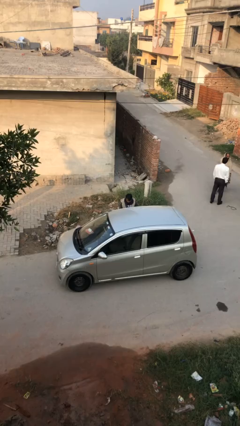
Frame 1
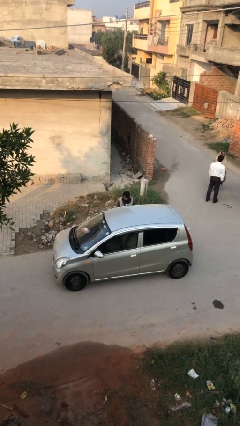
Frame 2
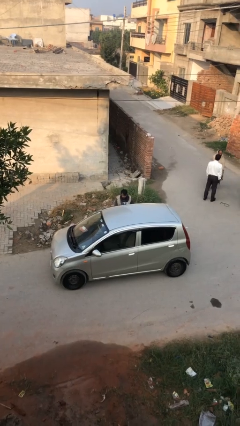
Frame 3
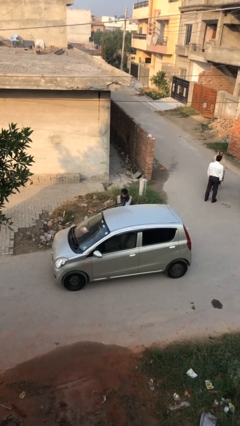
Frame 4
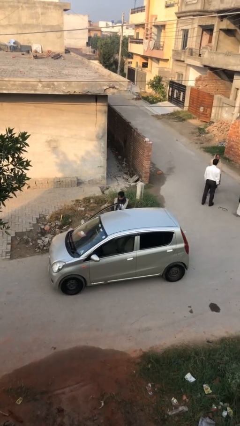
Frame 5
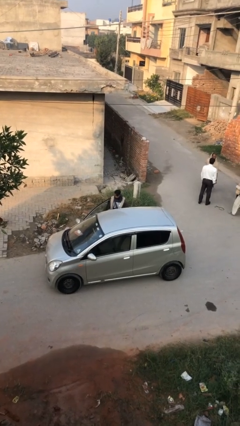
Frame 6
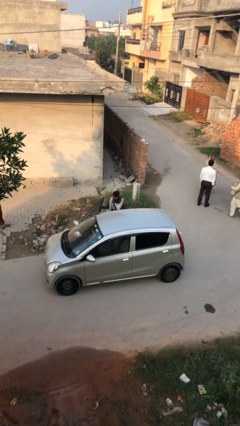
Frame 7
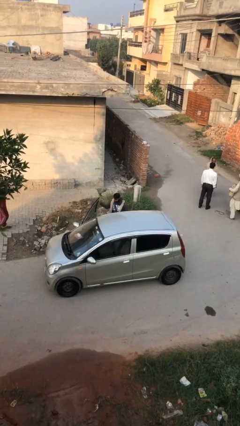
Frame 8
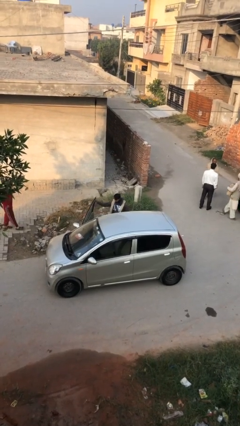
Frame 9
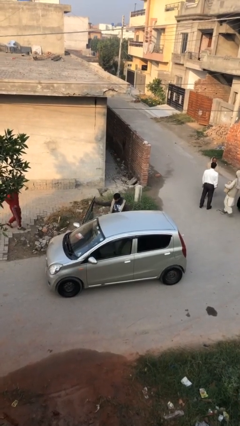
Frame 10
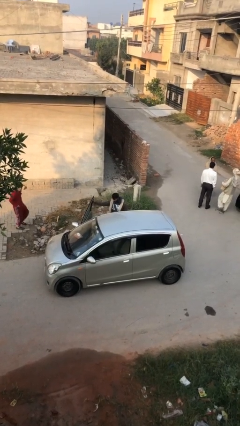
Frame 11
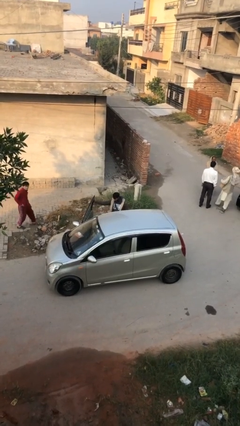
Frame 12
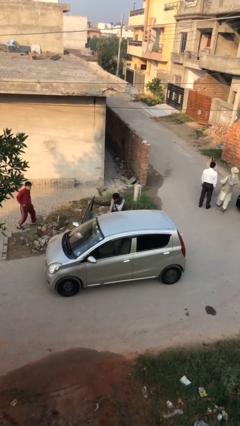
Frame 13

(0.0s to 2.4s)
person opens car door

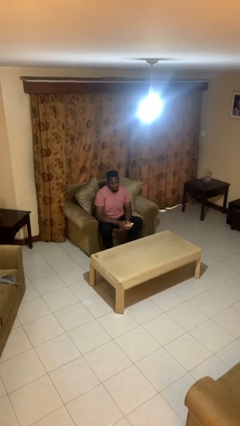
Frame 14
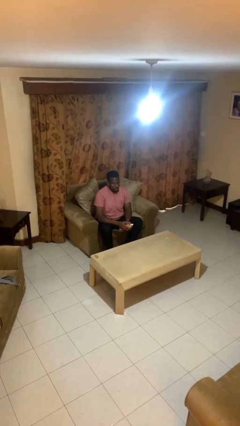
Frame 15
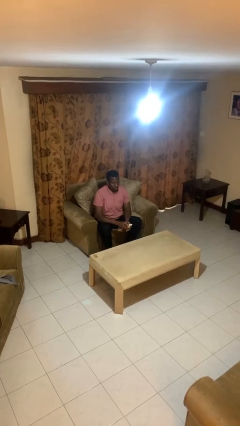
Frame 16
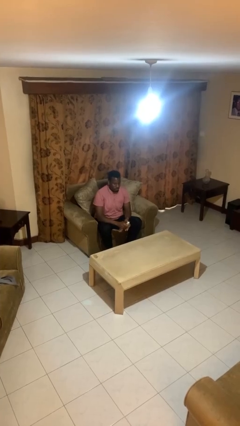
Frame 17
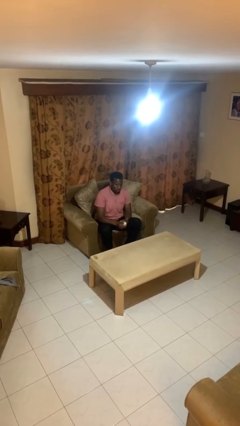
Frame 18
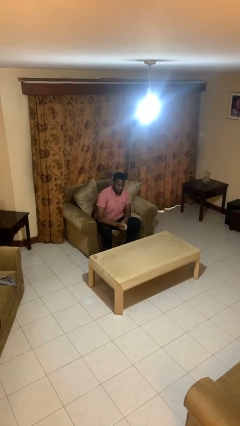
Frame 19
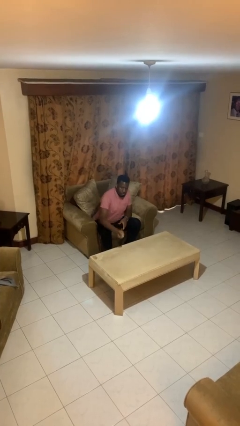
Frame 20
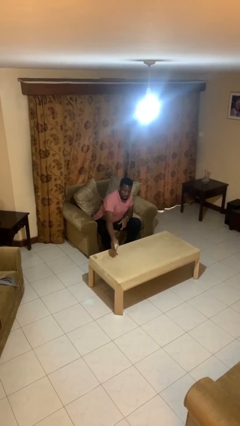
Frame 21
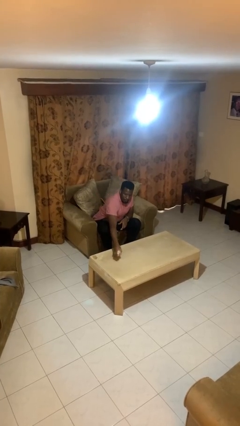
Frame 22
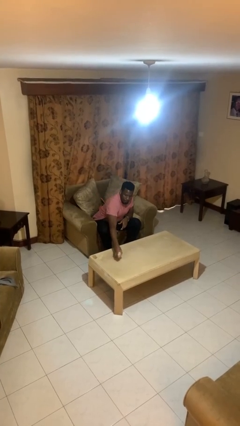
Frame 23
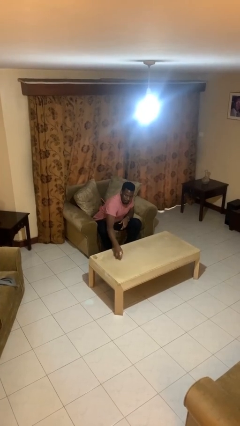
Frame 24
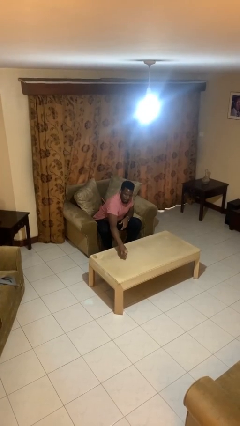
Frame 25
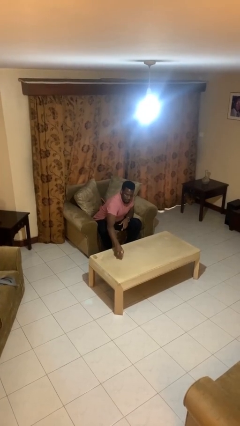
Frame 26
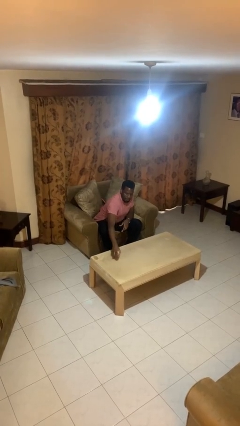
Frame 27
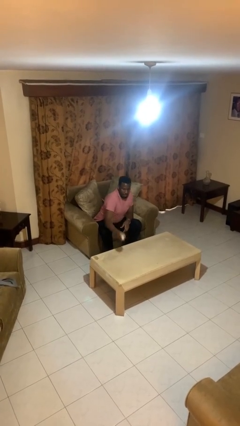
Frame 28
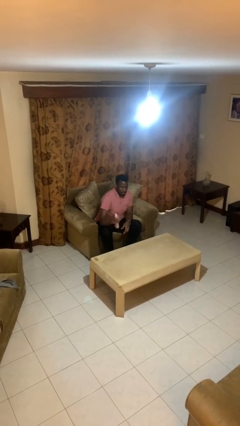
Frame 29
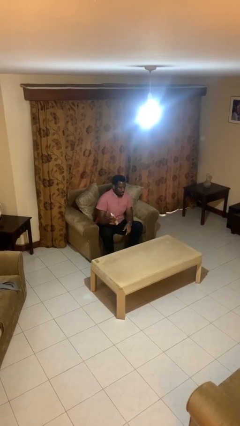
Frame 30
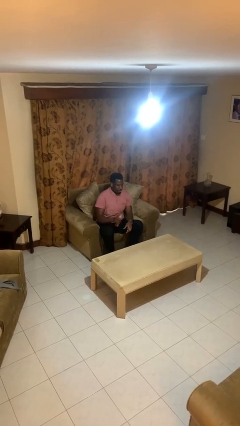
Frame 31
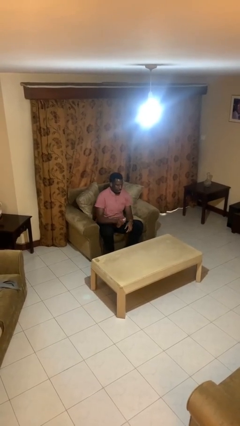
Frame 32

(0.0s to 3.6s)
person sprays from bottle

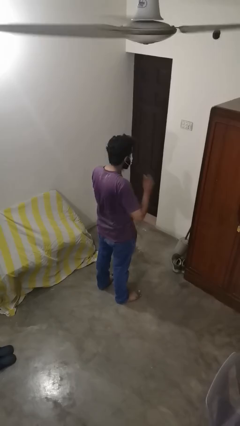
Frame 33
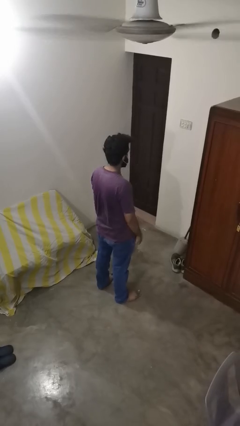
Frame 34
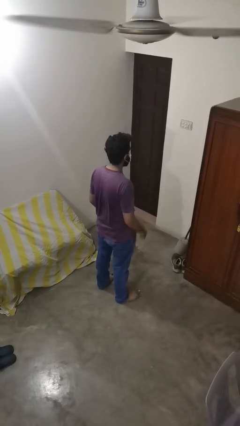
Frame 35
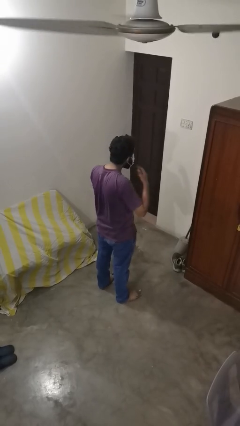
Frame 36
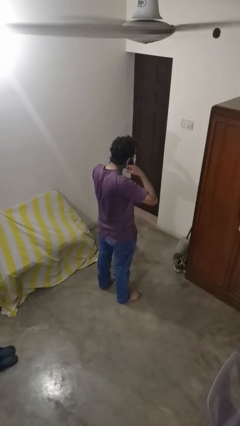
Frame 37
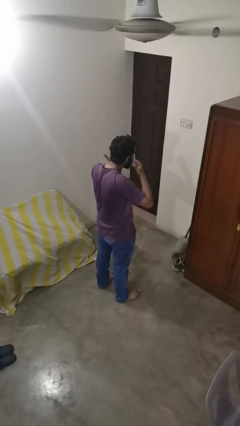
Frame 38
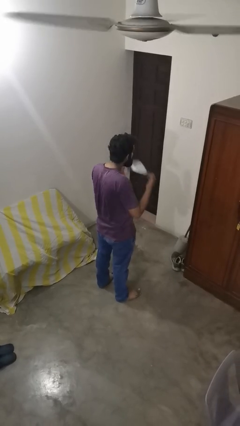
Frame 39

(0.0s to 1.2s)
person takes off facemask

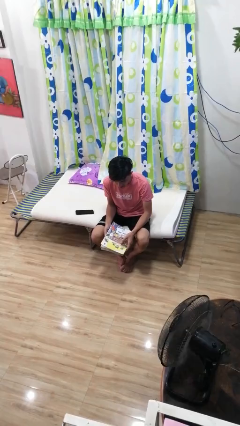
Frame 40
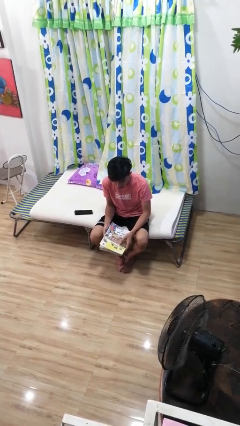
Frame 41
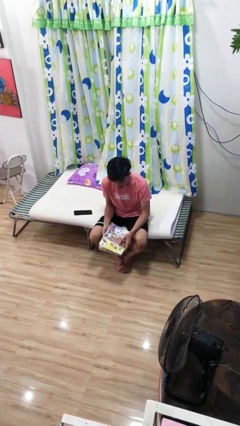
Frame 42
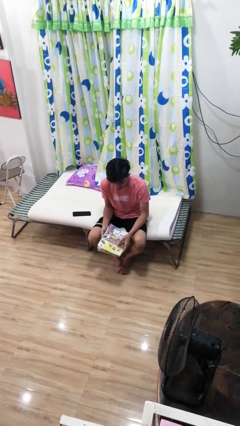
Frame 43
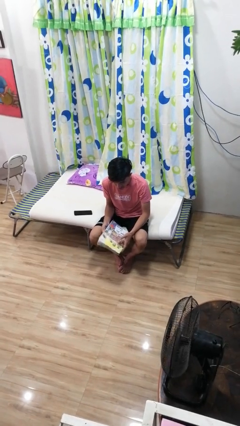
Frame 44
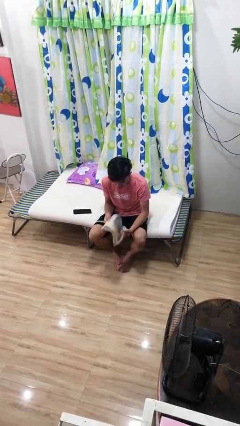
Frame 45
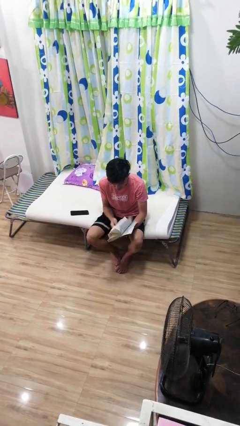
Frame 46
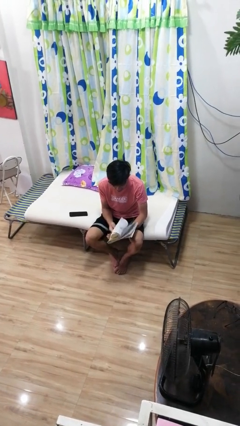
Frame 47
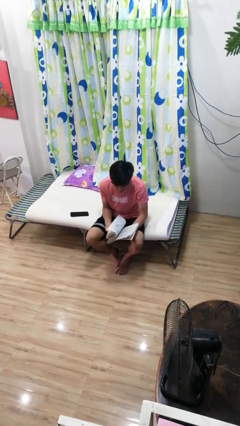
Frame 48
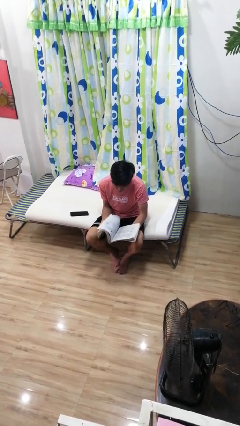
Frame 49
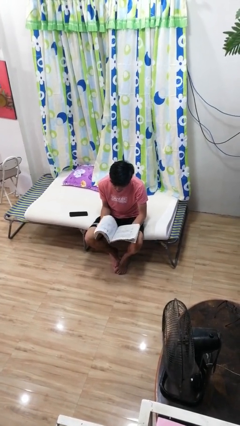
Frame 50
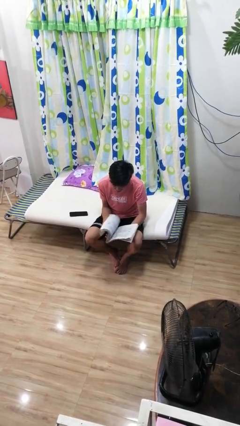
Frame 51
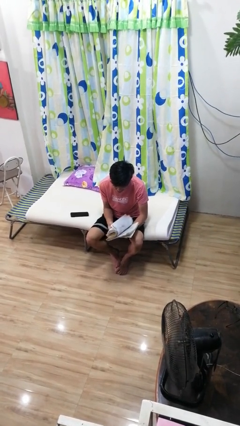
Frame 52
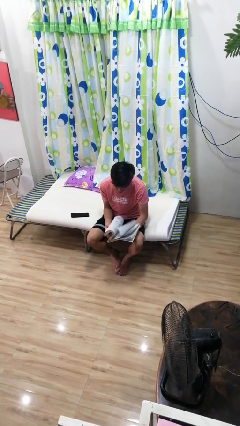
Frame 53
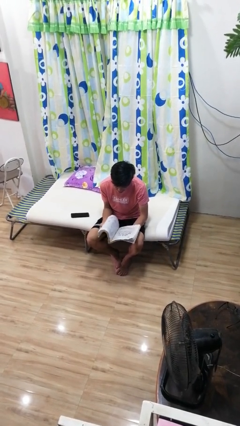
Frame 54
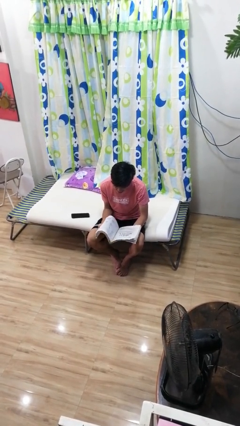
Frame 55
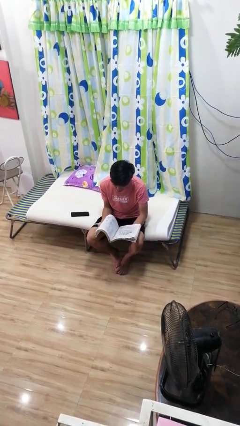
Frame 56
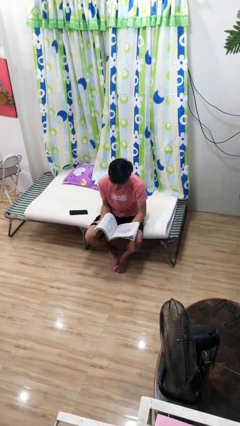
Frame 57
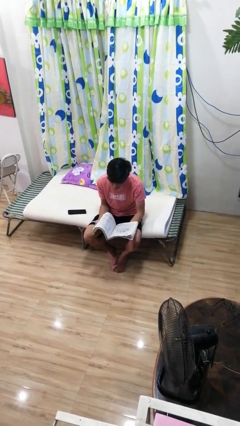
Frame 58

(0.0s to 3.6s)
person reads book

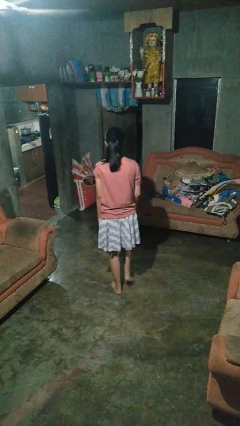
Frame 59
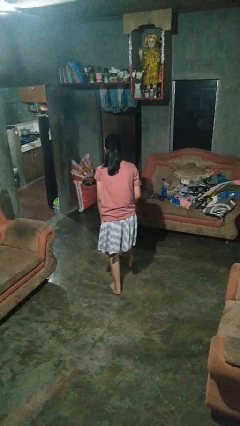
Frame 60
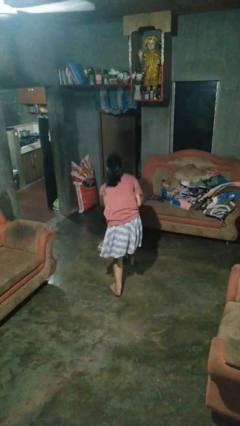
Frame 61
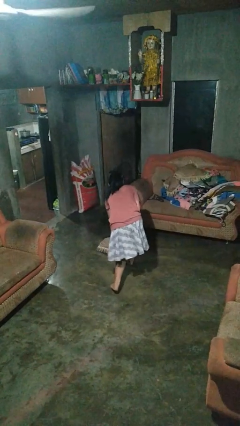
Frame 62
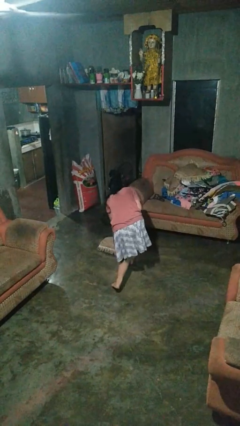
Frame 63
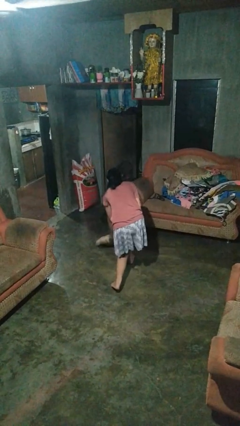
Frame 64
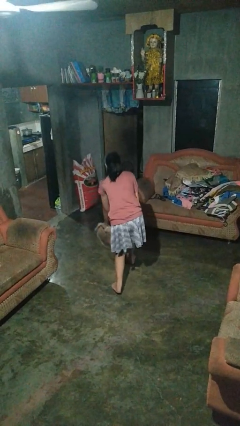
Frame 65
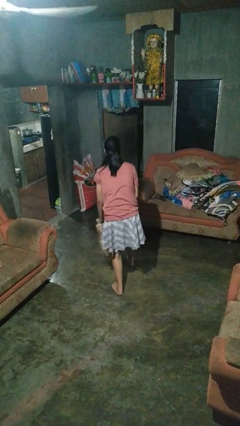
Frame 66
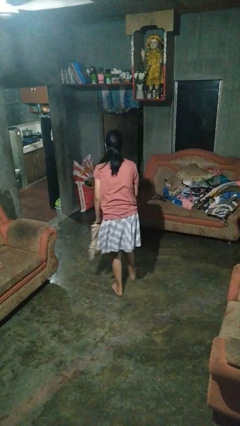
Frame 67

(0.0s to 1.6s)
person picks up object from floor

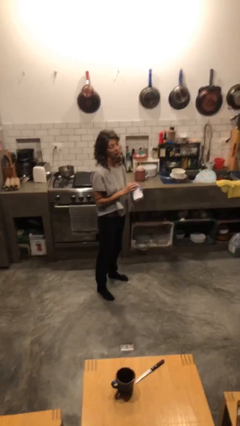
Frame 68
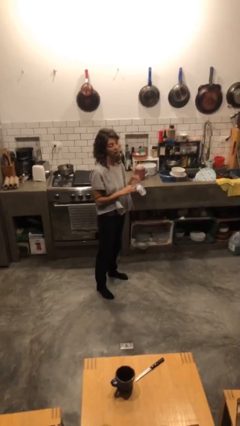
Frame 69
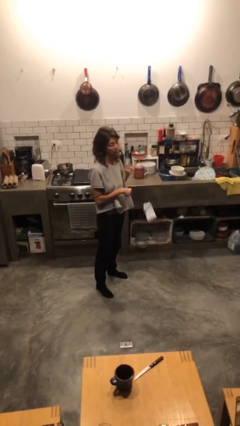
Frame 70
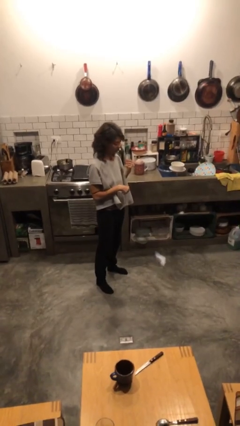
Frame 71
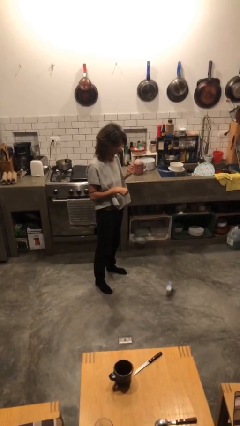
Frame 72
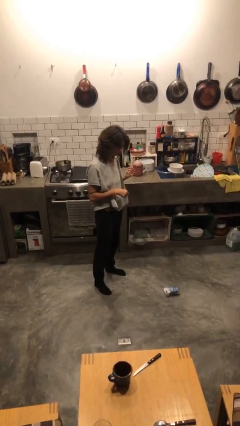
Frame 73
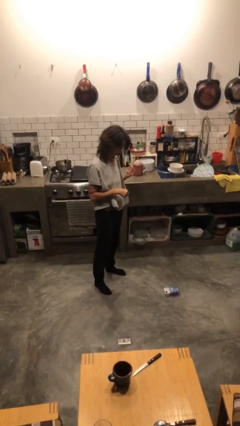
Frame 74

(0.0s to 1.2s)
person drops object

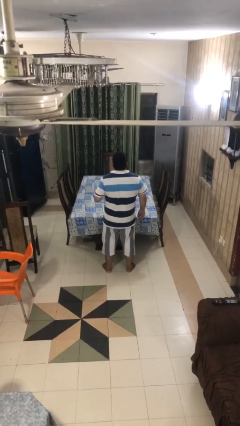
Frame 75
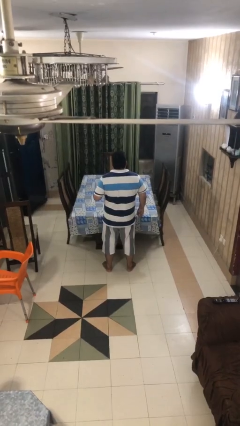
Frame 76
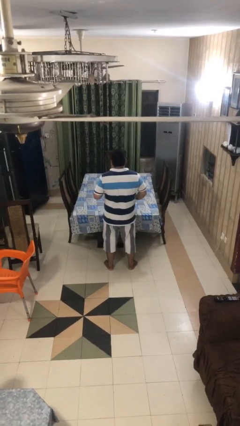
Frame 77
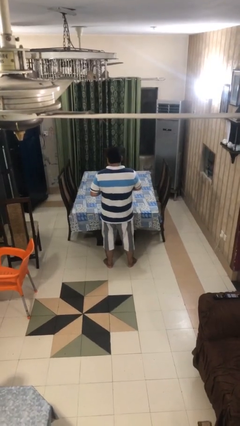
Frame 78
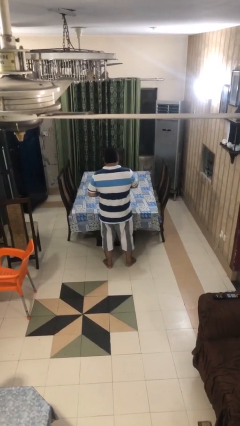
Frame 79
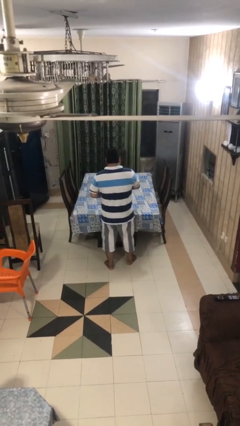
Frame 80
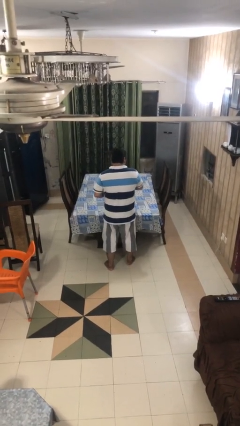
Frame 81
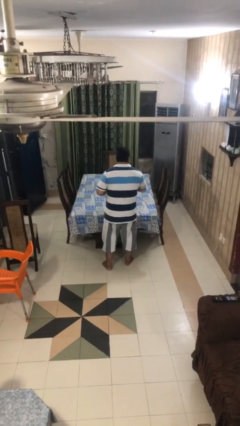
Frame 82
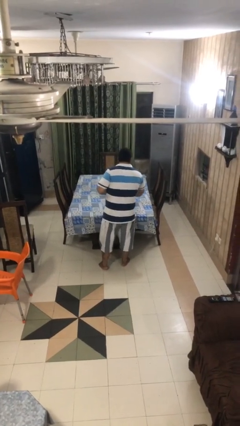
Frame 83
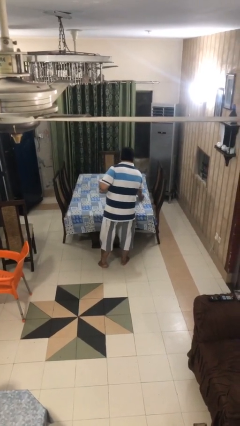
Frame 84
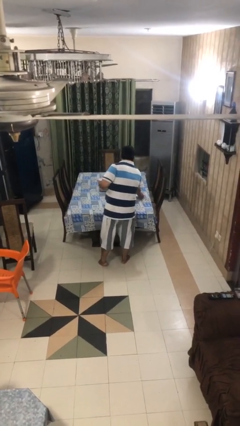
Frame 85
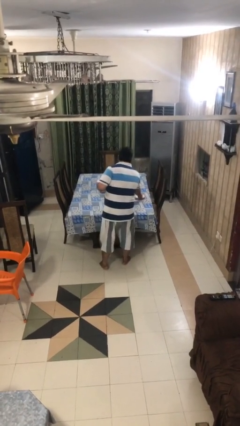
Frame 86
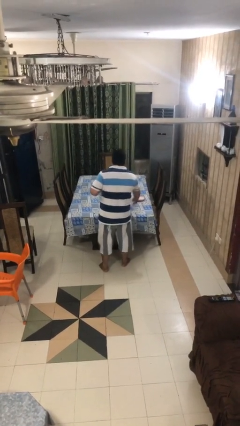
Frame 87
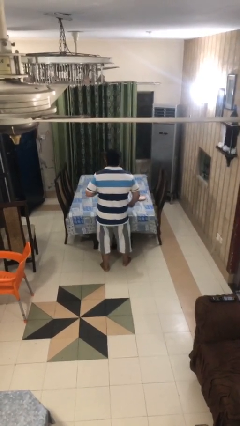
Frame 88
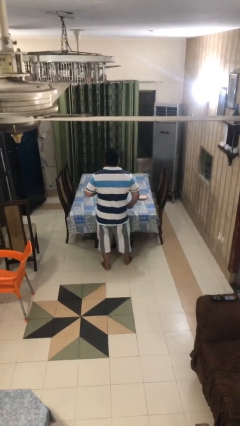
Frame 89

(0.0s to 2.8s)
person sets table

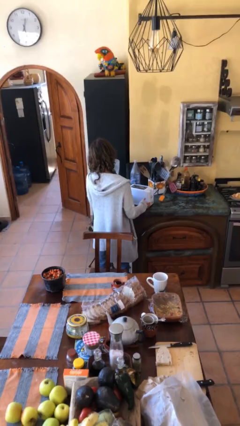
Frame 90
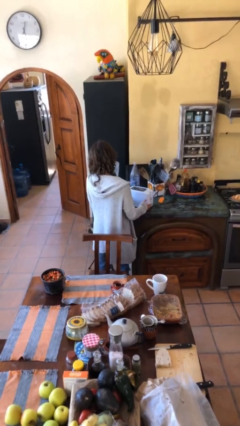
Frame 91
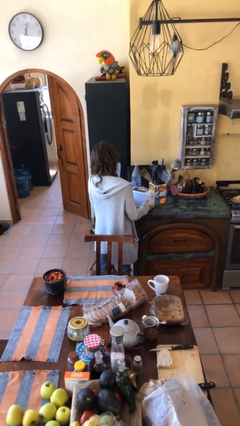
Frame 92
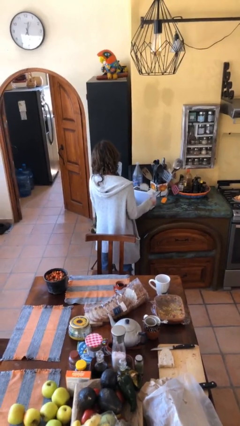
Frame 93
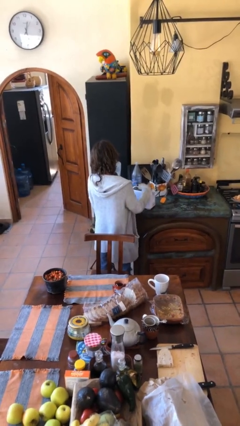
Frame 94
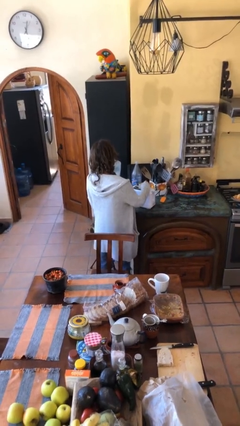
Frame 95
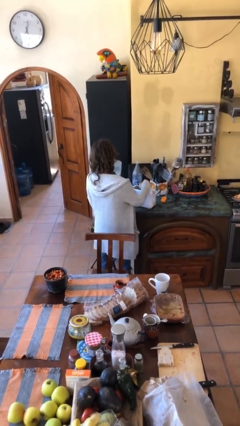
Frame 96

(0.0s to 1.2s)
person takes object from toaster
